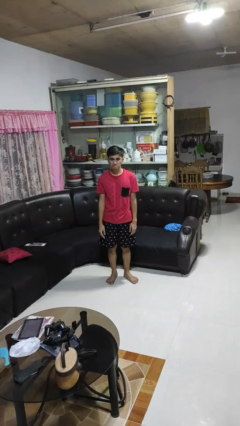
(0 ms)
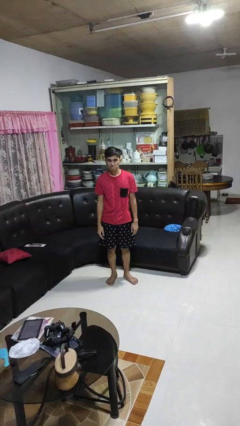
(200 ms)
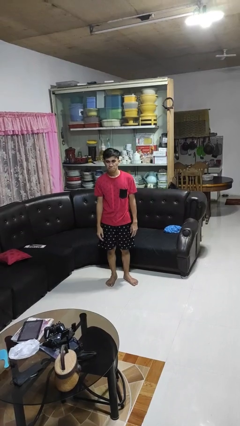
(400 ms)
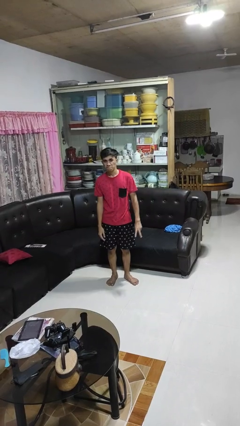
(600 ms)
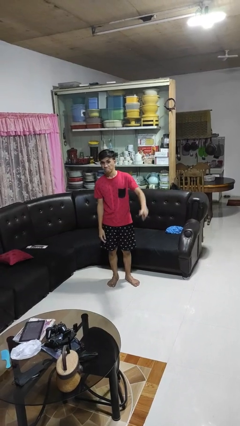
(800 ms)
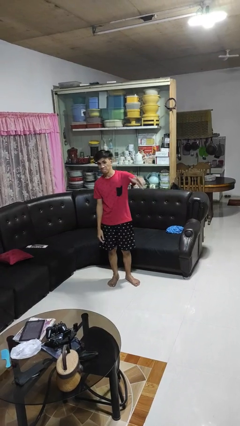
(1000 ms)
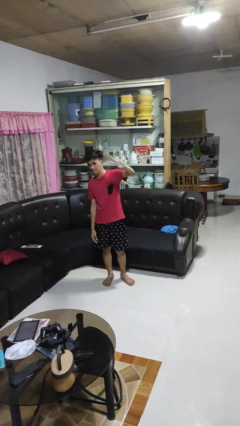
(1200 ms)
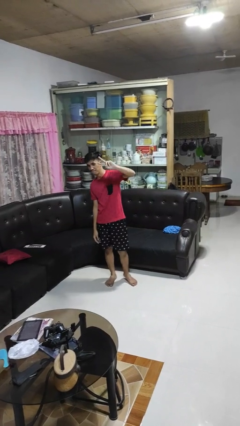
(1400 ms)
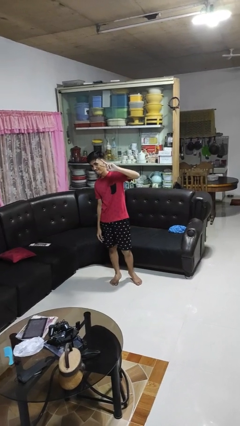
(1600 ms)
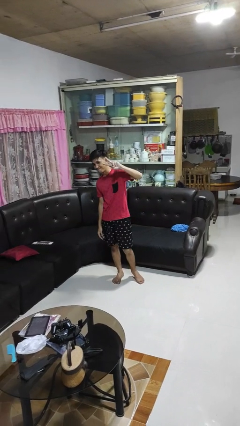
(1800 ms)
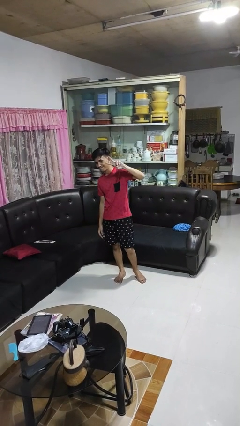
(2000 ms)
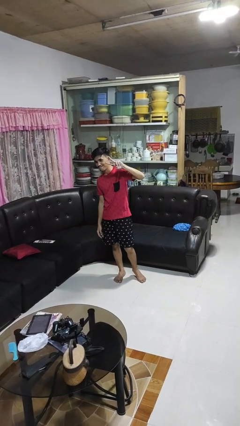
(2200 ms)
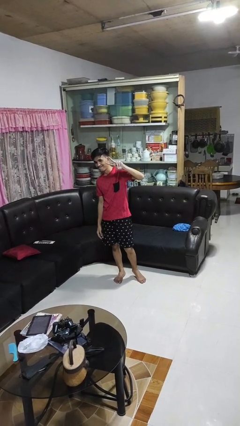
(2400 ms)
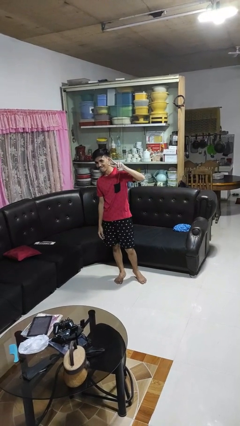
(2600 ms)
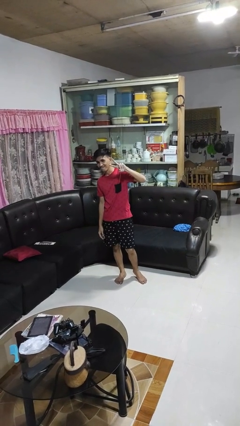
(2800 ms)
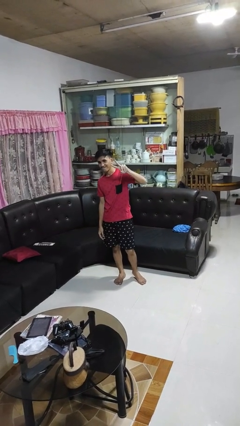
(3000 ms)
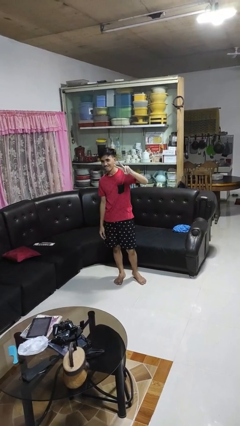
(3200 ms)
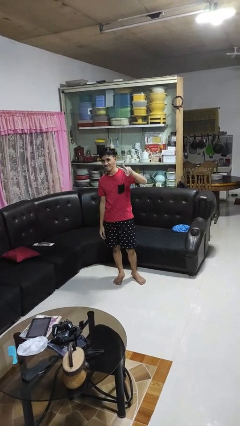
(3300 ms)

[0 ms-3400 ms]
person gestures peace

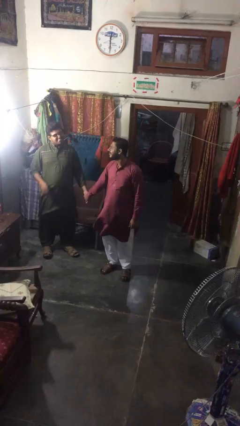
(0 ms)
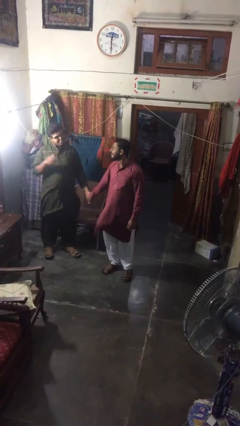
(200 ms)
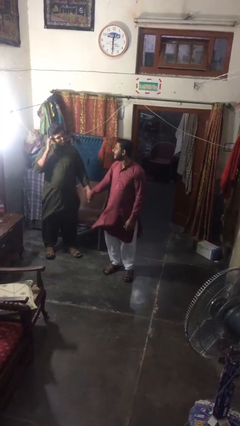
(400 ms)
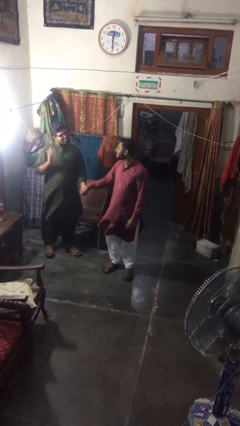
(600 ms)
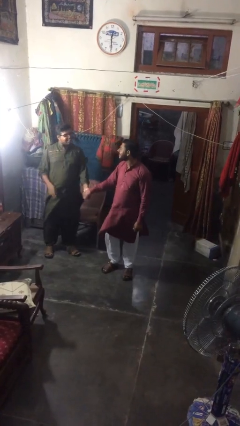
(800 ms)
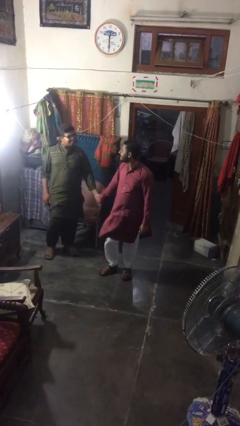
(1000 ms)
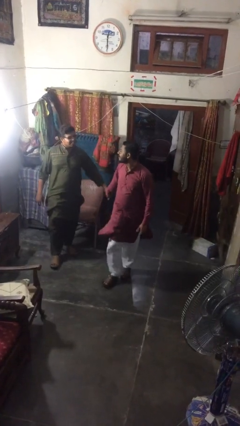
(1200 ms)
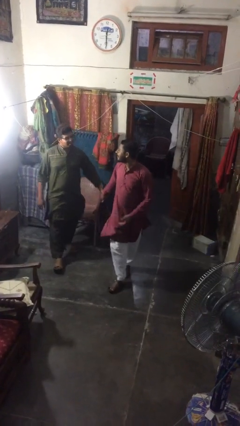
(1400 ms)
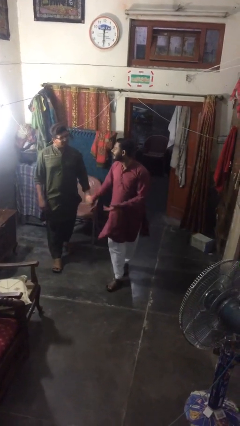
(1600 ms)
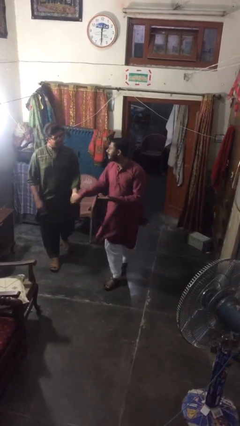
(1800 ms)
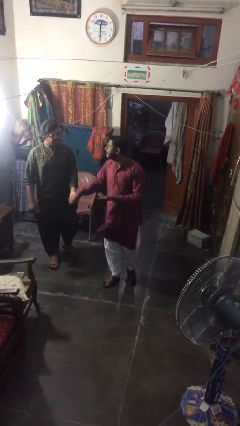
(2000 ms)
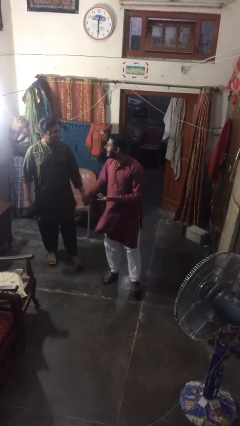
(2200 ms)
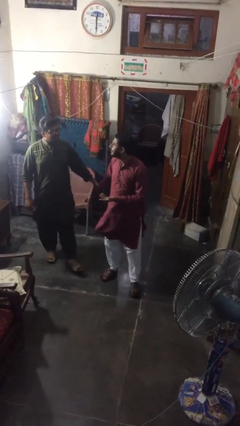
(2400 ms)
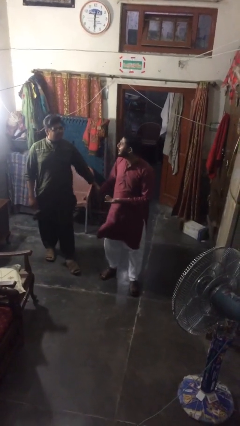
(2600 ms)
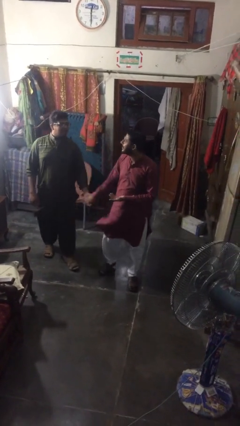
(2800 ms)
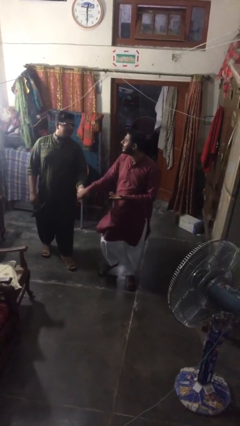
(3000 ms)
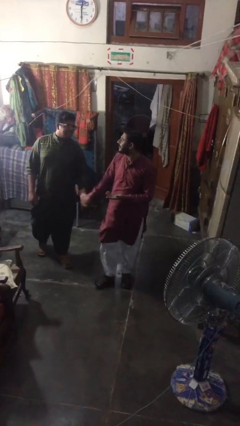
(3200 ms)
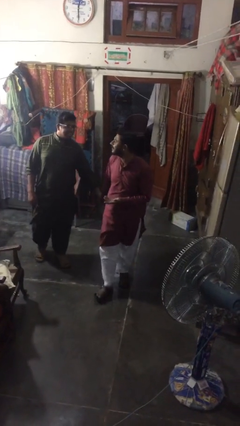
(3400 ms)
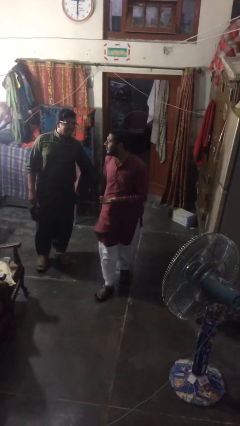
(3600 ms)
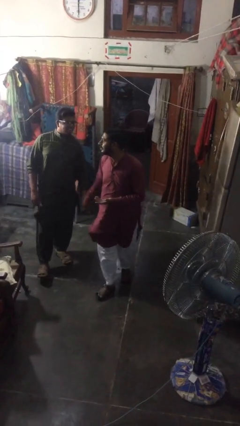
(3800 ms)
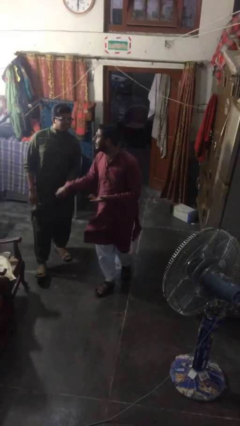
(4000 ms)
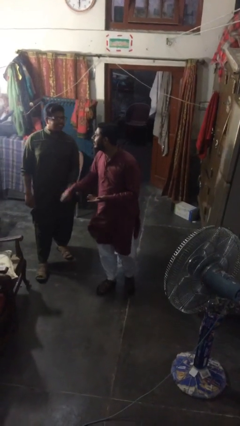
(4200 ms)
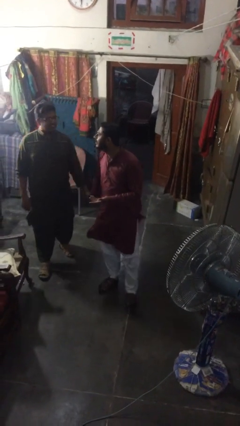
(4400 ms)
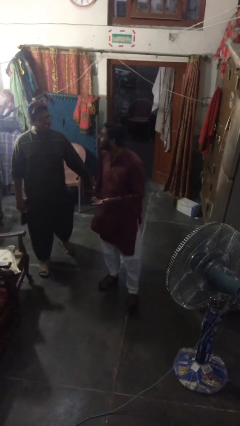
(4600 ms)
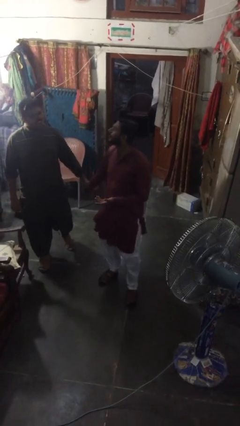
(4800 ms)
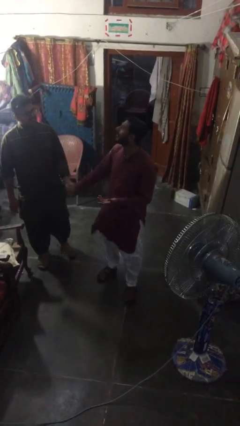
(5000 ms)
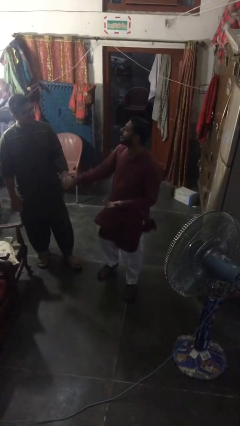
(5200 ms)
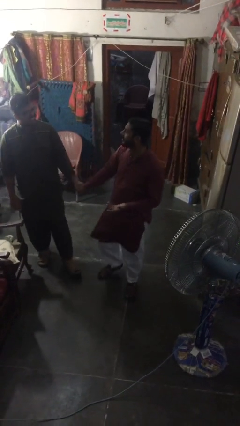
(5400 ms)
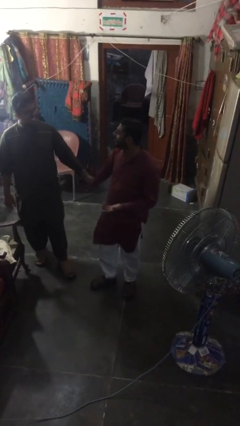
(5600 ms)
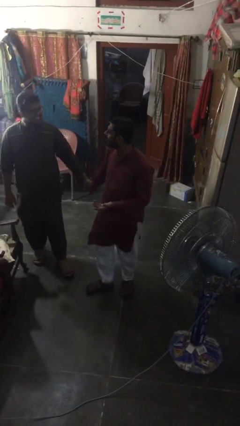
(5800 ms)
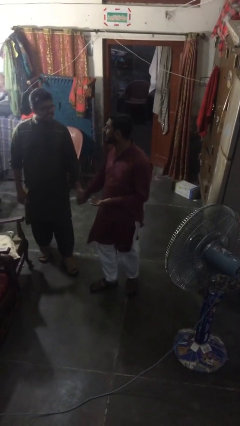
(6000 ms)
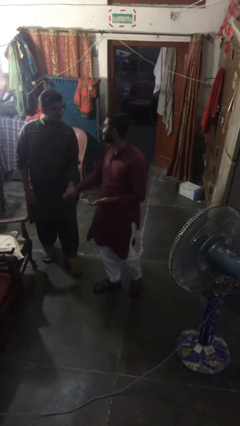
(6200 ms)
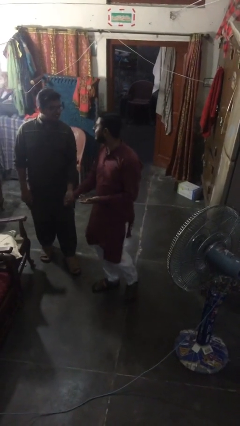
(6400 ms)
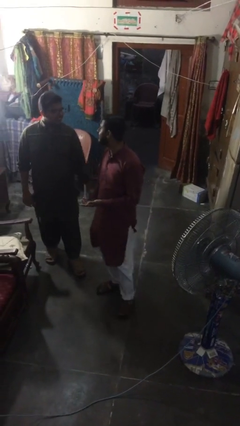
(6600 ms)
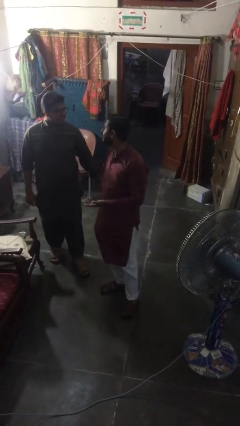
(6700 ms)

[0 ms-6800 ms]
person holds hand

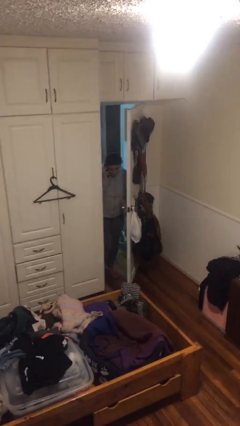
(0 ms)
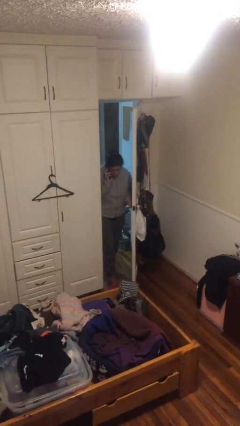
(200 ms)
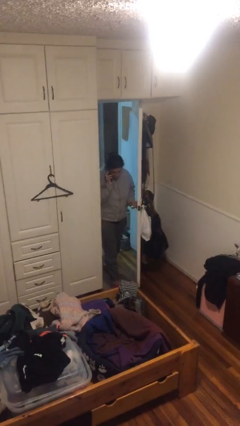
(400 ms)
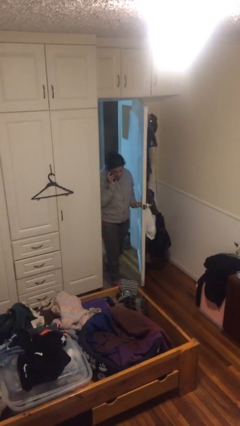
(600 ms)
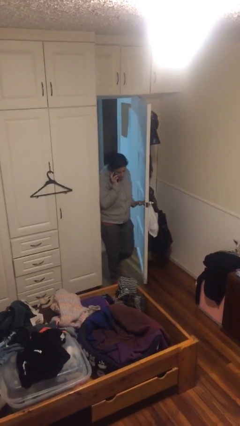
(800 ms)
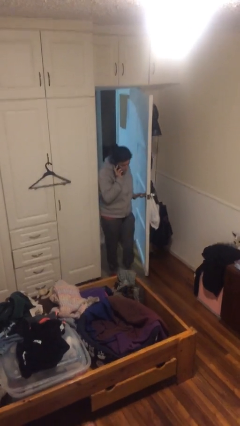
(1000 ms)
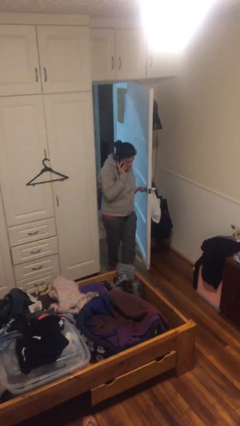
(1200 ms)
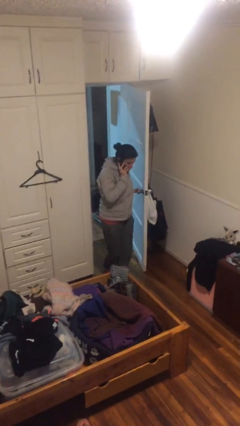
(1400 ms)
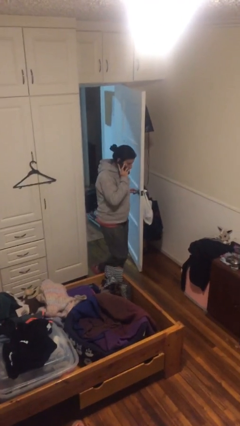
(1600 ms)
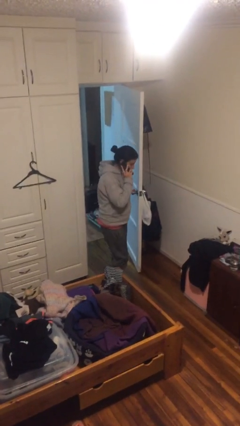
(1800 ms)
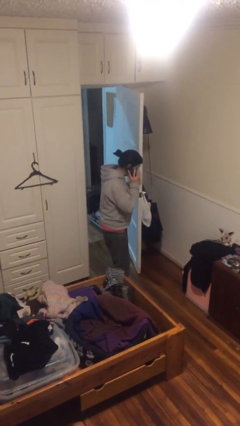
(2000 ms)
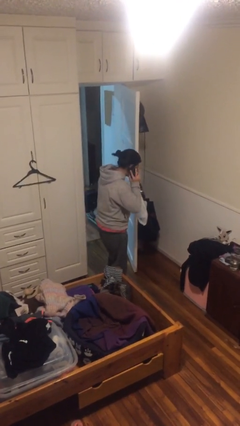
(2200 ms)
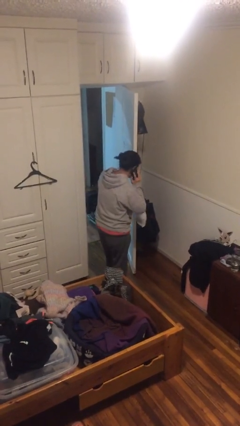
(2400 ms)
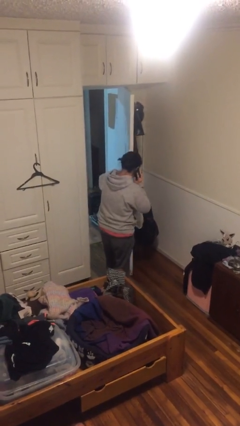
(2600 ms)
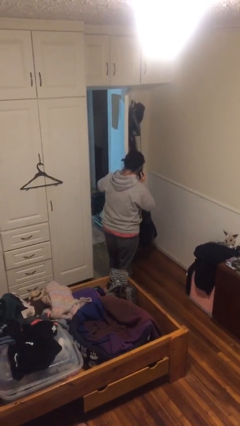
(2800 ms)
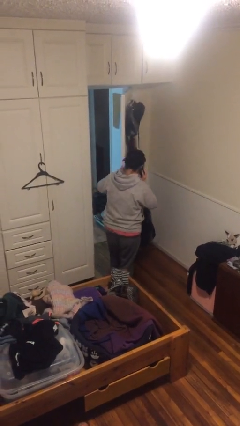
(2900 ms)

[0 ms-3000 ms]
person enters scene through structure

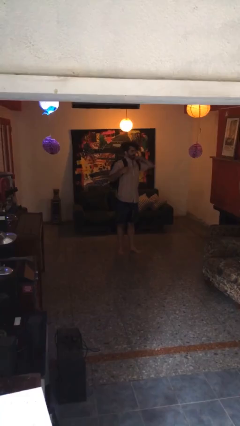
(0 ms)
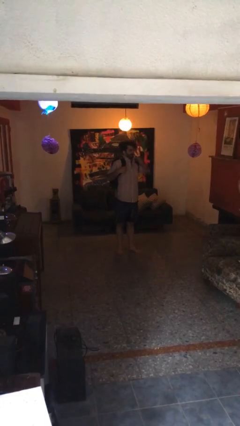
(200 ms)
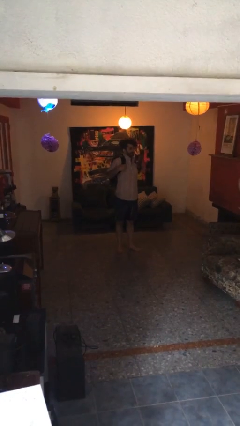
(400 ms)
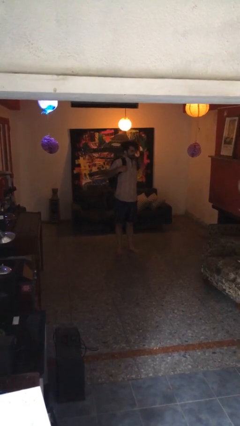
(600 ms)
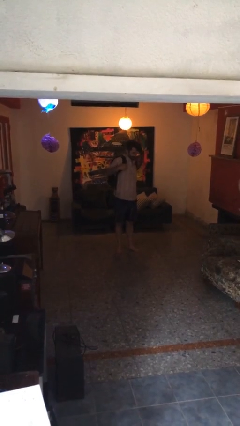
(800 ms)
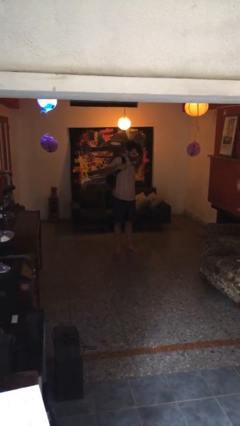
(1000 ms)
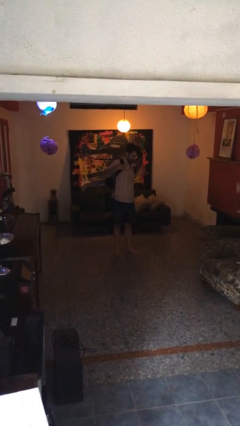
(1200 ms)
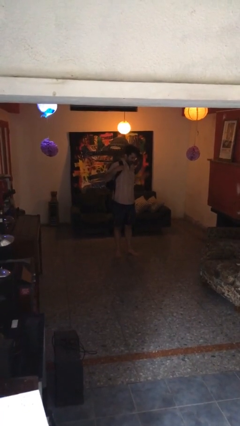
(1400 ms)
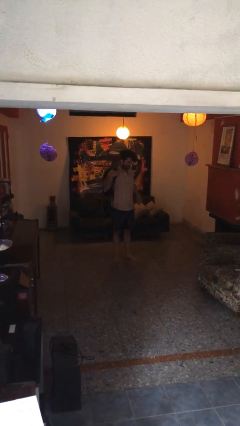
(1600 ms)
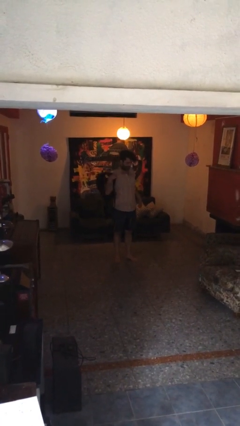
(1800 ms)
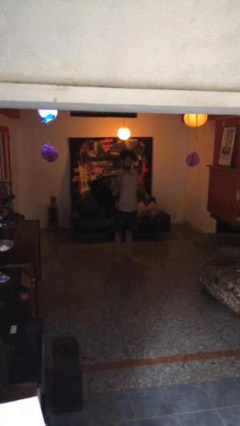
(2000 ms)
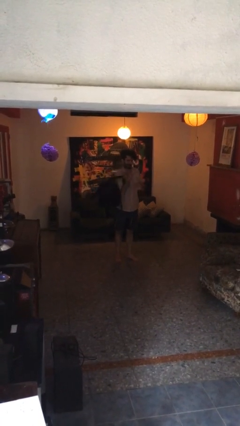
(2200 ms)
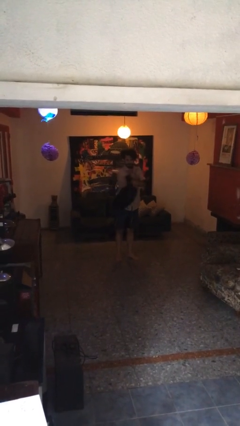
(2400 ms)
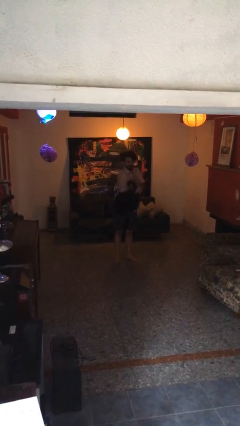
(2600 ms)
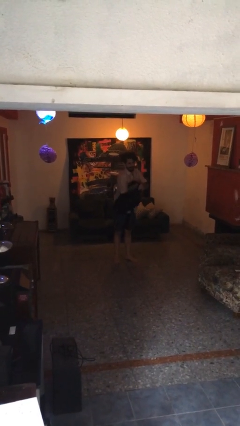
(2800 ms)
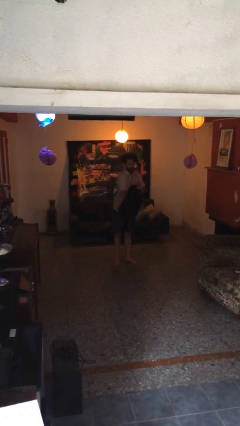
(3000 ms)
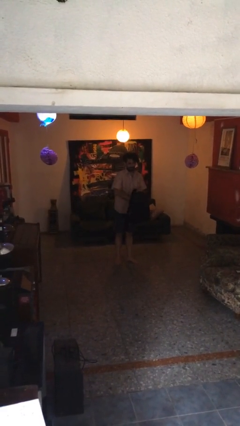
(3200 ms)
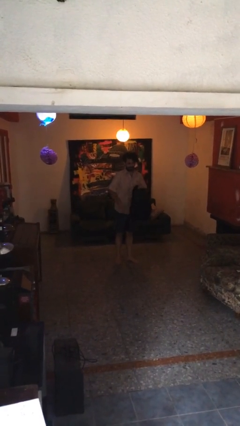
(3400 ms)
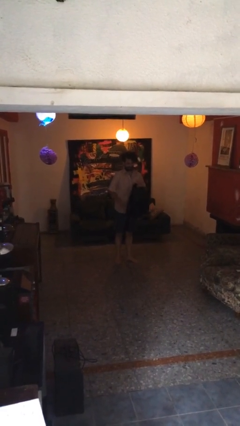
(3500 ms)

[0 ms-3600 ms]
person takes off backpack

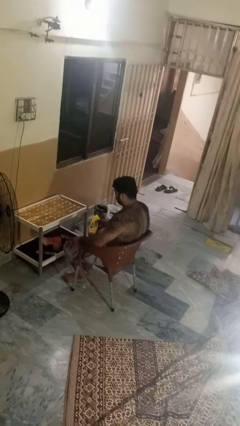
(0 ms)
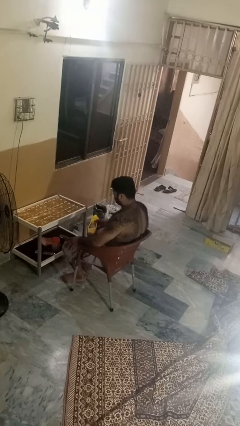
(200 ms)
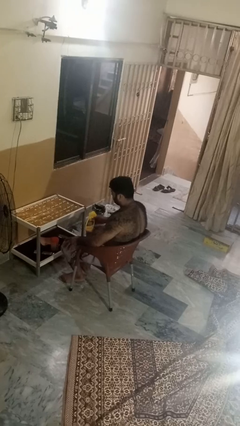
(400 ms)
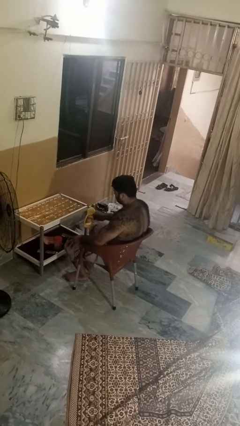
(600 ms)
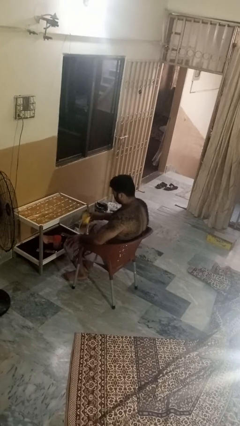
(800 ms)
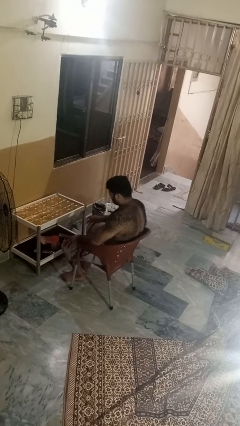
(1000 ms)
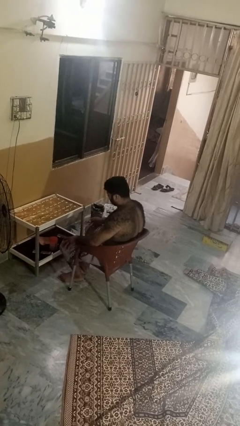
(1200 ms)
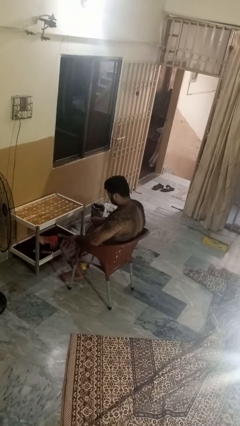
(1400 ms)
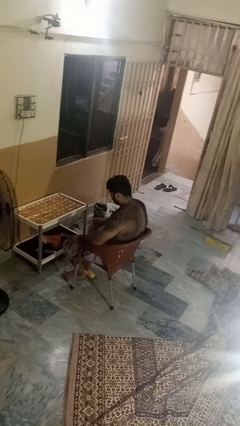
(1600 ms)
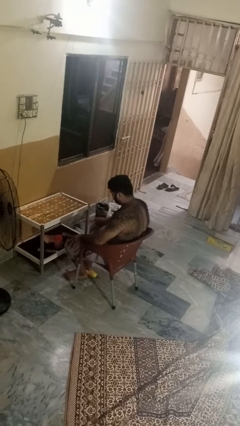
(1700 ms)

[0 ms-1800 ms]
person throws object to ground
